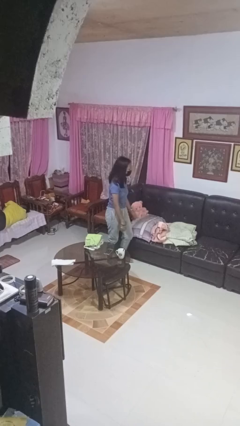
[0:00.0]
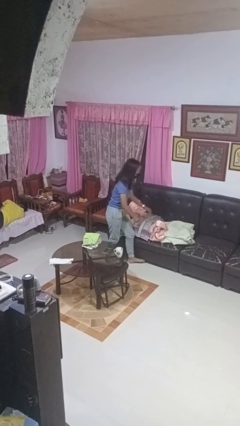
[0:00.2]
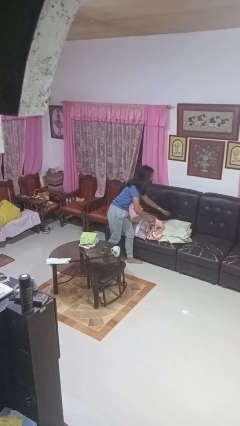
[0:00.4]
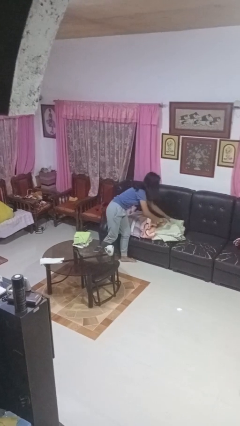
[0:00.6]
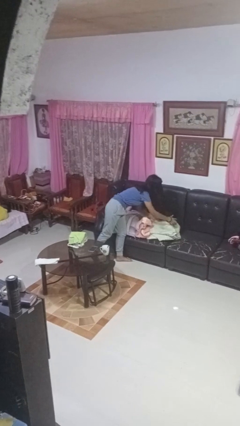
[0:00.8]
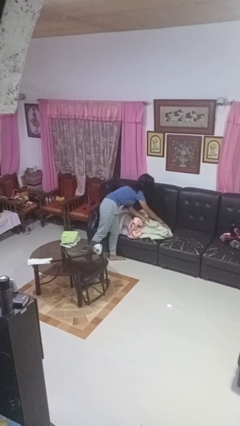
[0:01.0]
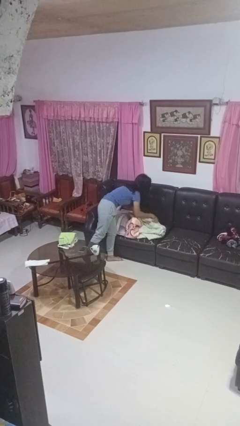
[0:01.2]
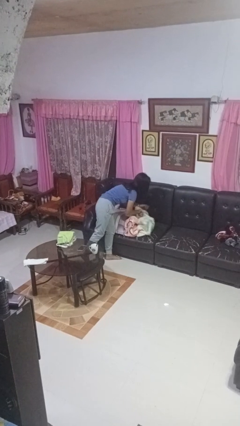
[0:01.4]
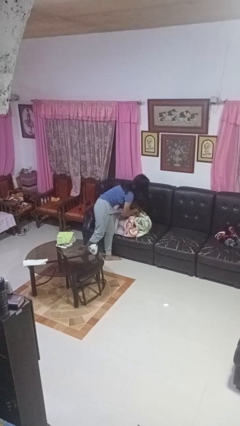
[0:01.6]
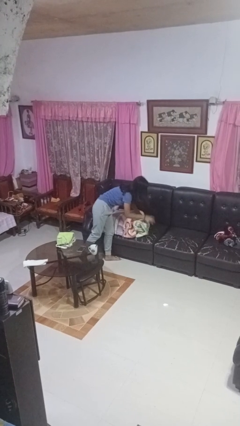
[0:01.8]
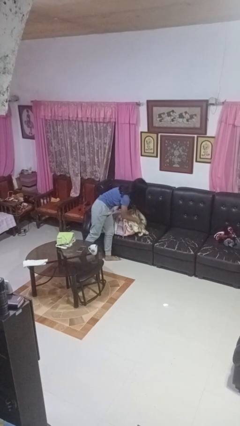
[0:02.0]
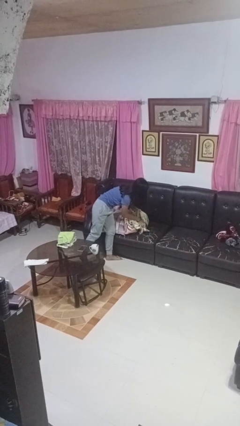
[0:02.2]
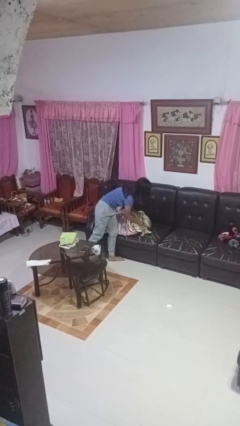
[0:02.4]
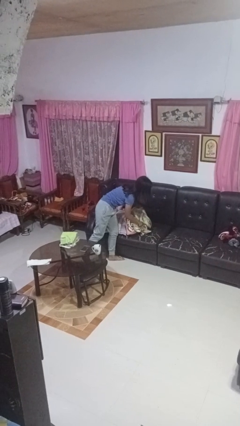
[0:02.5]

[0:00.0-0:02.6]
person searches in couch

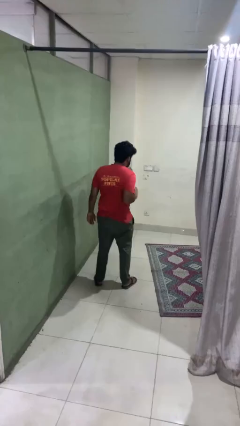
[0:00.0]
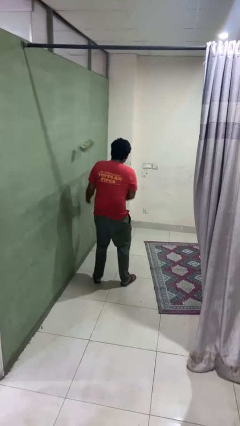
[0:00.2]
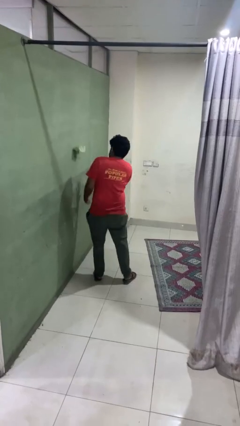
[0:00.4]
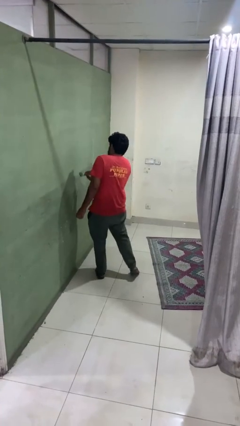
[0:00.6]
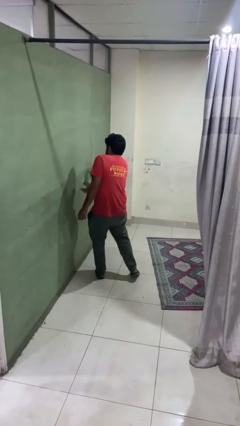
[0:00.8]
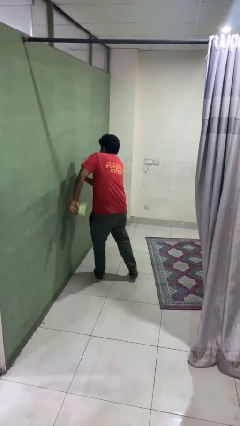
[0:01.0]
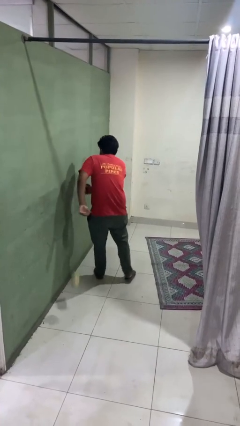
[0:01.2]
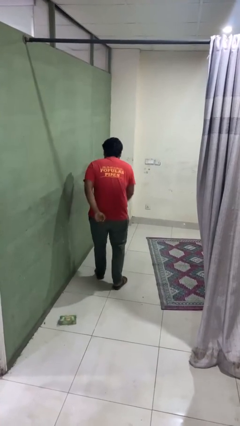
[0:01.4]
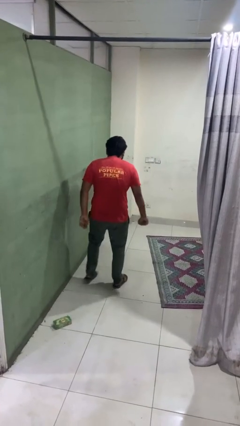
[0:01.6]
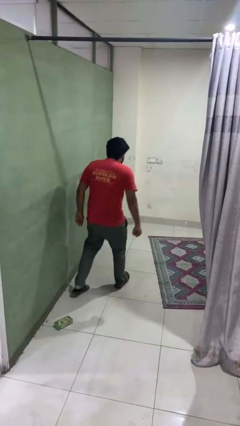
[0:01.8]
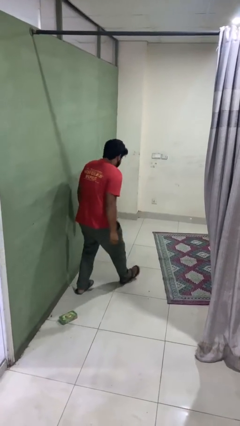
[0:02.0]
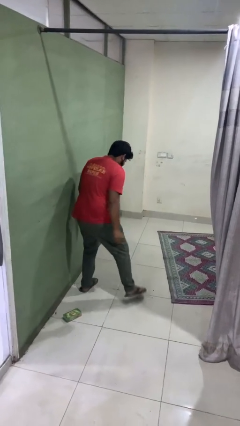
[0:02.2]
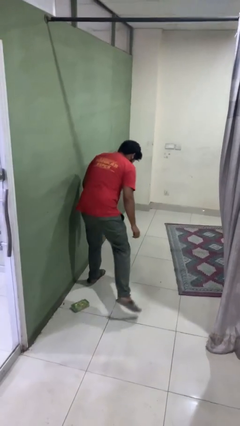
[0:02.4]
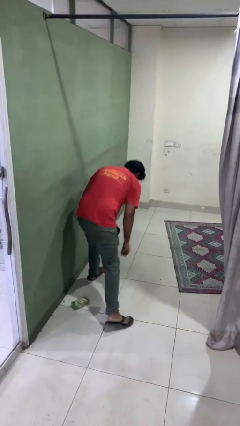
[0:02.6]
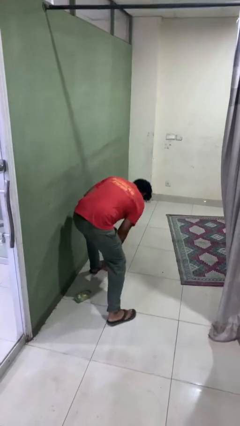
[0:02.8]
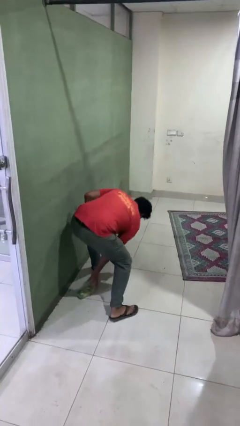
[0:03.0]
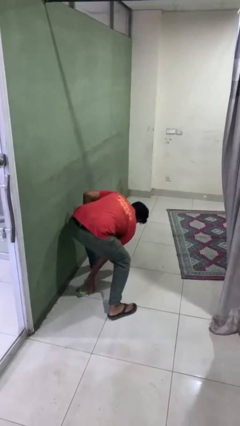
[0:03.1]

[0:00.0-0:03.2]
person catches dropped object

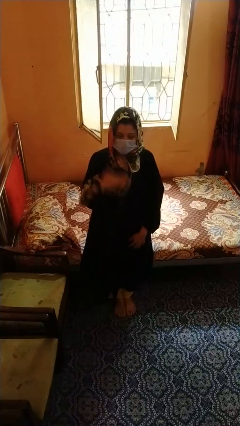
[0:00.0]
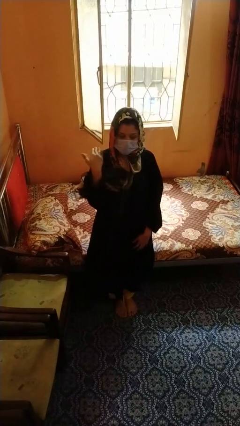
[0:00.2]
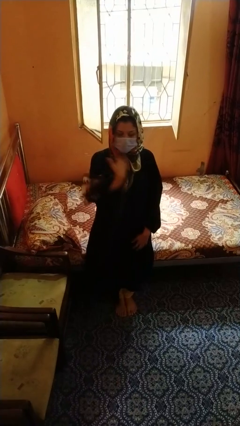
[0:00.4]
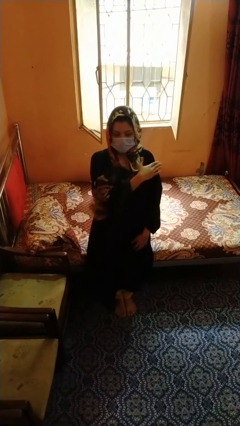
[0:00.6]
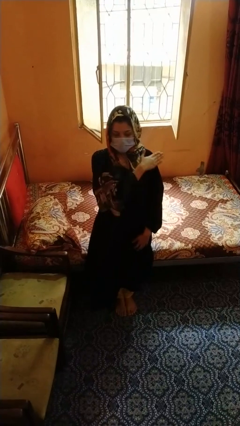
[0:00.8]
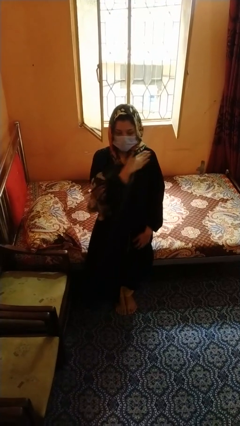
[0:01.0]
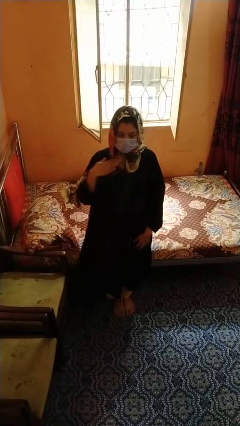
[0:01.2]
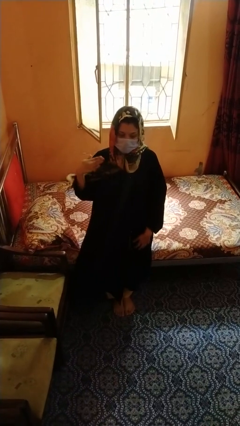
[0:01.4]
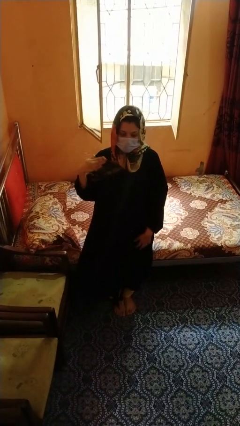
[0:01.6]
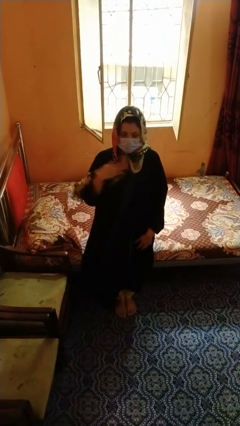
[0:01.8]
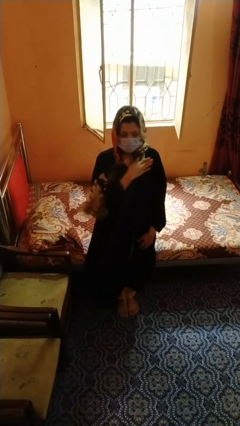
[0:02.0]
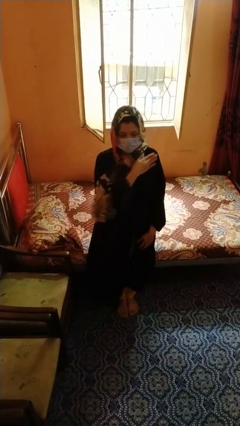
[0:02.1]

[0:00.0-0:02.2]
person gestures cut

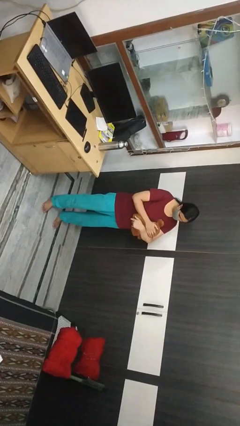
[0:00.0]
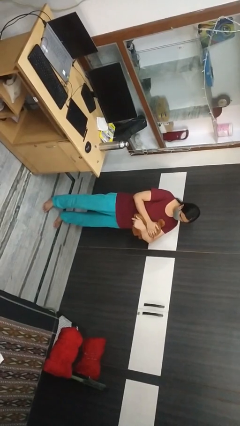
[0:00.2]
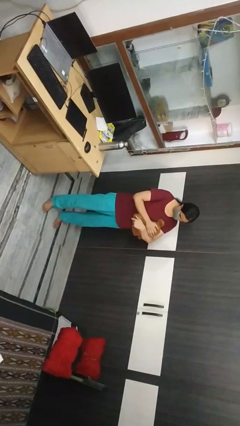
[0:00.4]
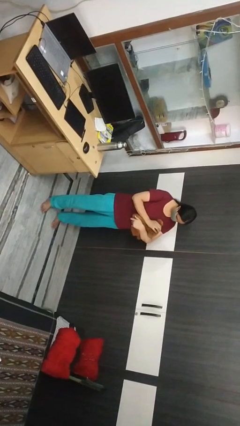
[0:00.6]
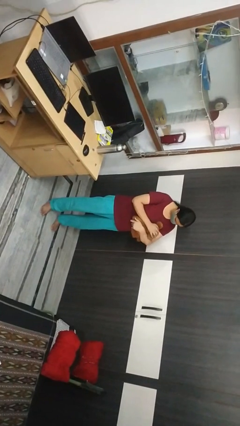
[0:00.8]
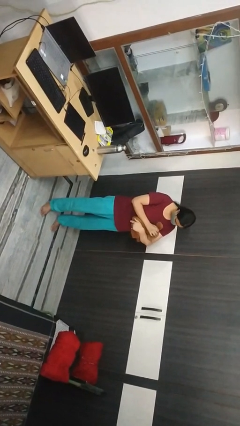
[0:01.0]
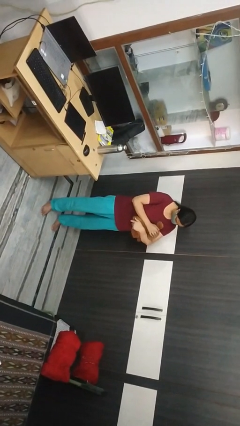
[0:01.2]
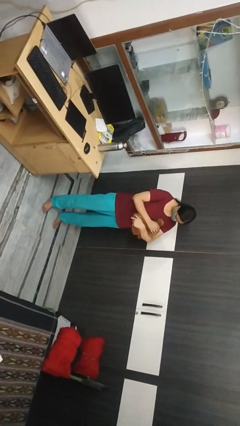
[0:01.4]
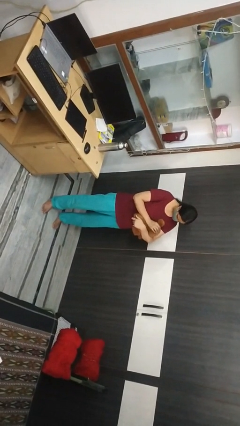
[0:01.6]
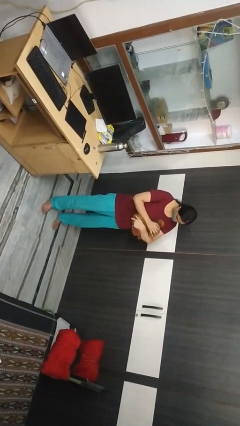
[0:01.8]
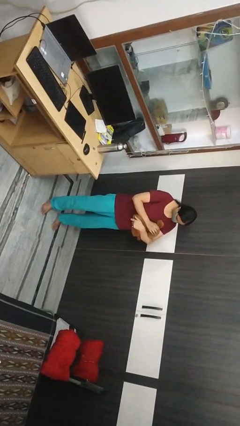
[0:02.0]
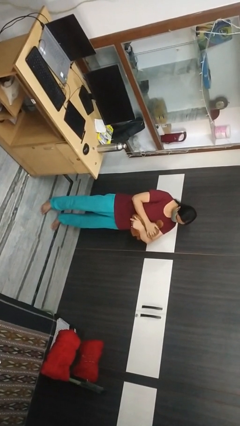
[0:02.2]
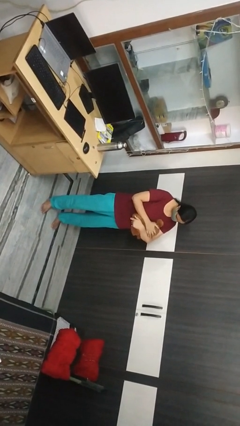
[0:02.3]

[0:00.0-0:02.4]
person pets cat

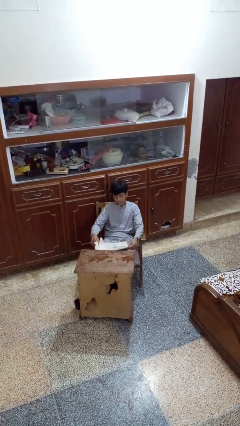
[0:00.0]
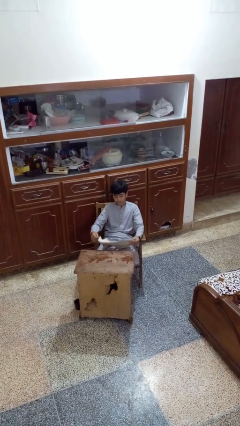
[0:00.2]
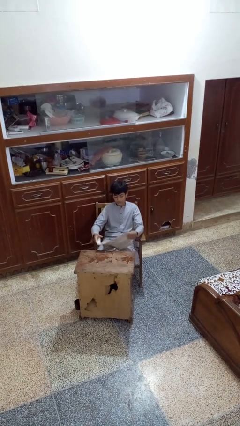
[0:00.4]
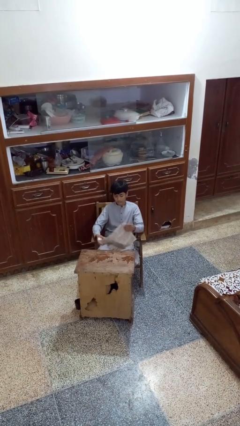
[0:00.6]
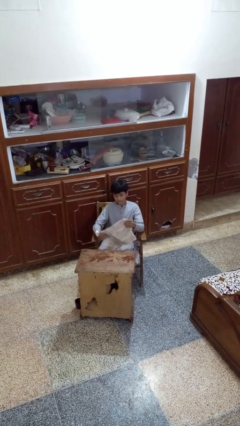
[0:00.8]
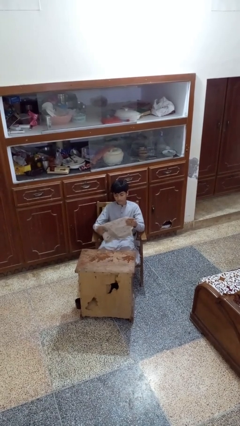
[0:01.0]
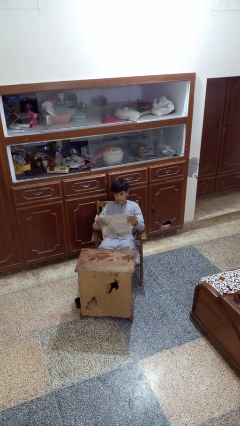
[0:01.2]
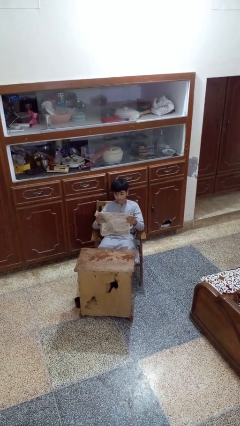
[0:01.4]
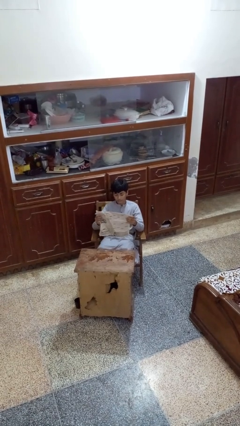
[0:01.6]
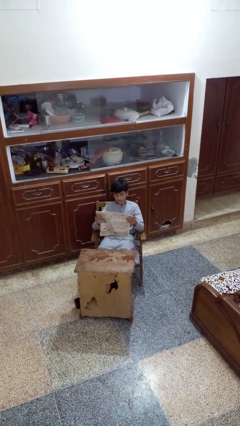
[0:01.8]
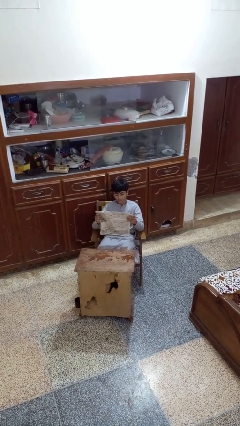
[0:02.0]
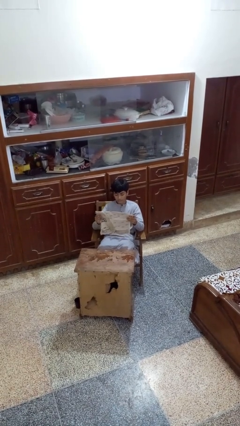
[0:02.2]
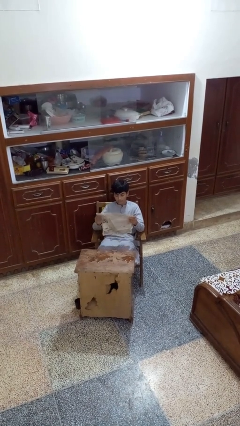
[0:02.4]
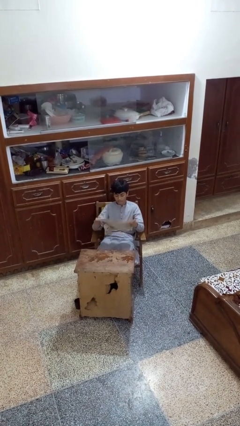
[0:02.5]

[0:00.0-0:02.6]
person reads newspaper

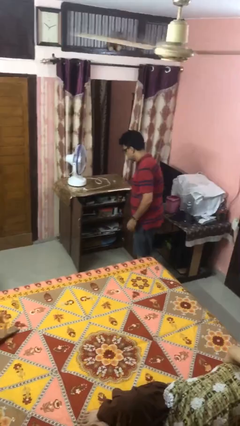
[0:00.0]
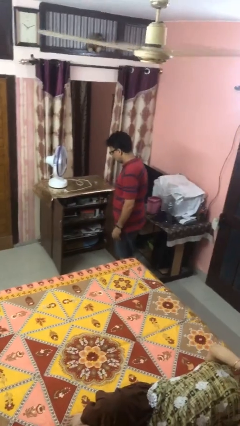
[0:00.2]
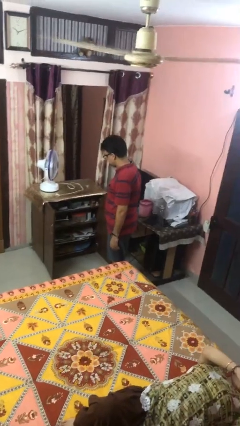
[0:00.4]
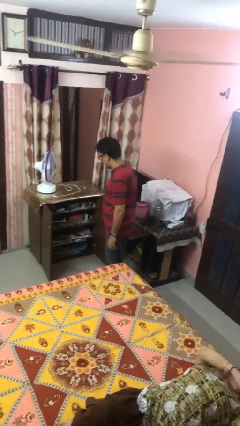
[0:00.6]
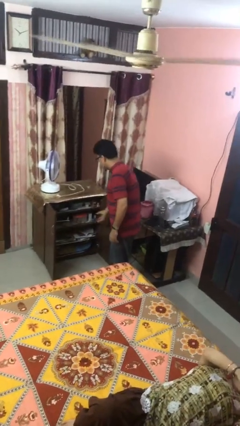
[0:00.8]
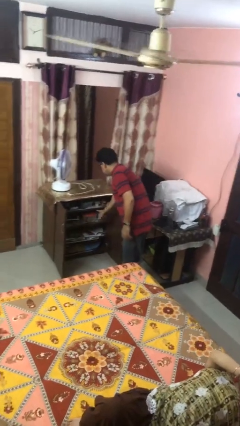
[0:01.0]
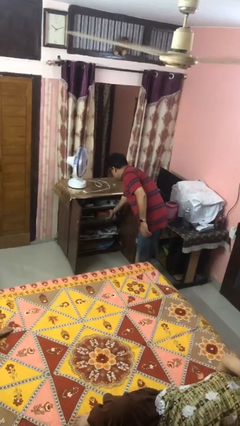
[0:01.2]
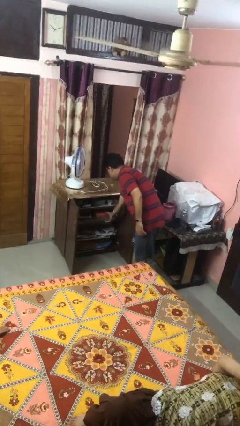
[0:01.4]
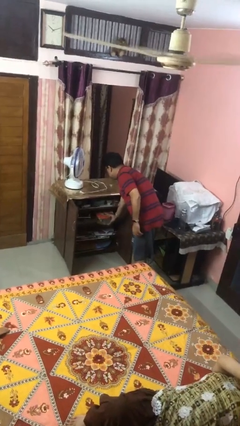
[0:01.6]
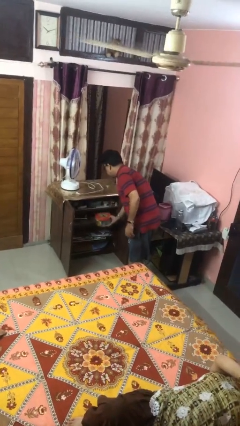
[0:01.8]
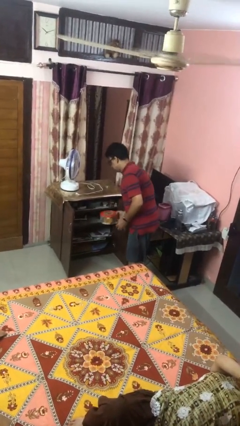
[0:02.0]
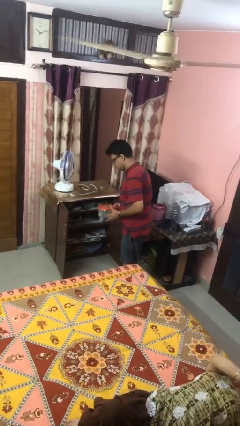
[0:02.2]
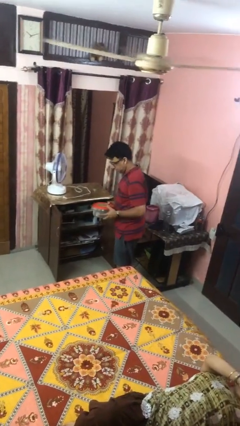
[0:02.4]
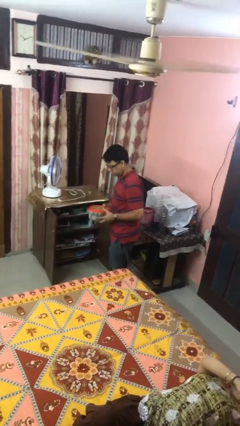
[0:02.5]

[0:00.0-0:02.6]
person picks up object from cabinet

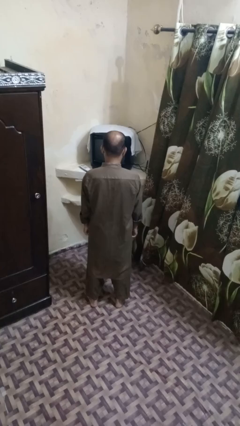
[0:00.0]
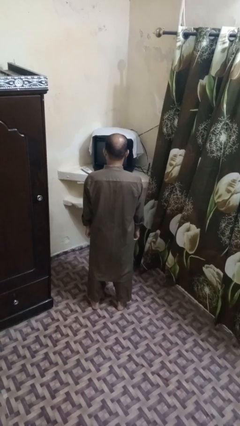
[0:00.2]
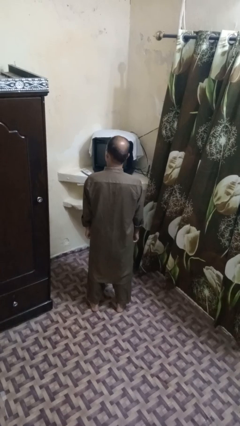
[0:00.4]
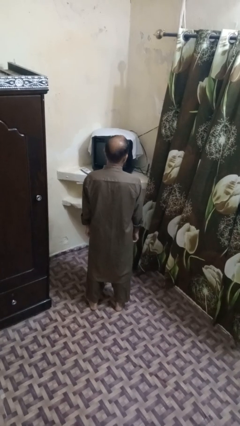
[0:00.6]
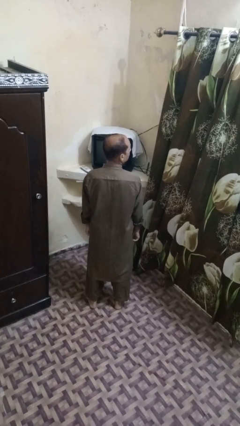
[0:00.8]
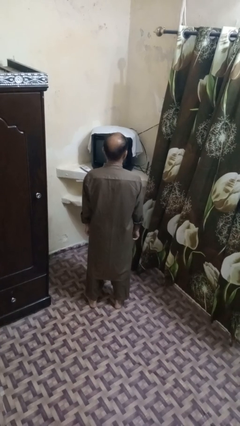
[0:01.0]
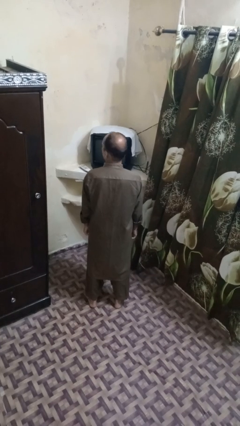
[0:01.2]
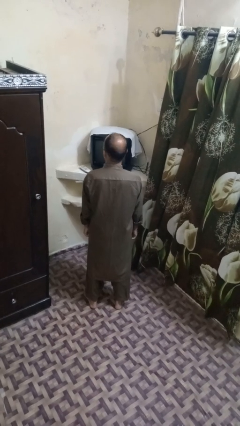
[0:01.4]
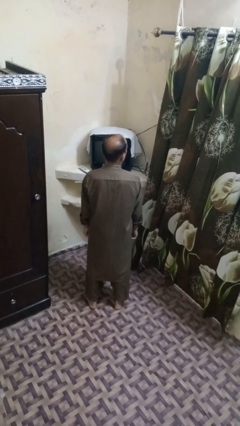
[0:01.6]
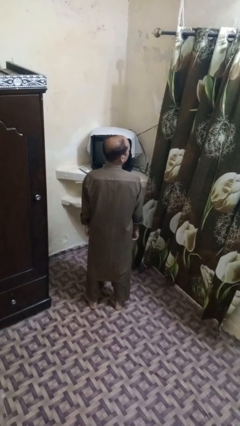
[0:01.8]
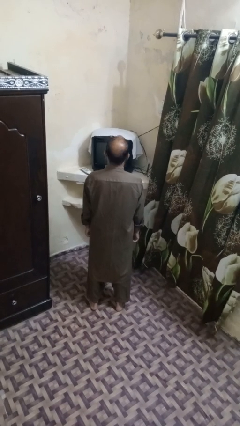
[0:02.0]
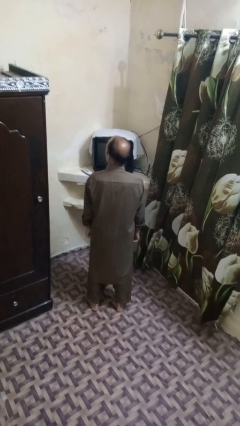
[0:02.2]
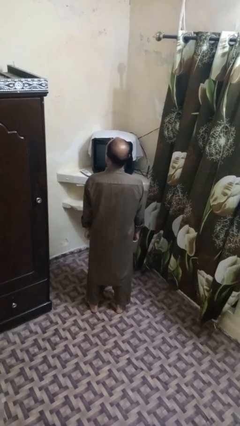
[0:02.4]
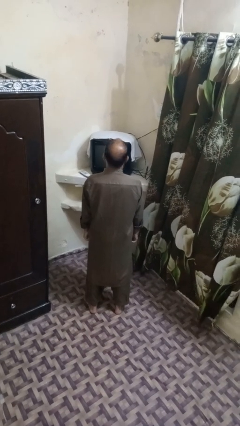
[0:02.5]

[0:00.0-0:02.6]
person shakes head
